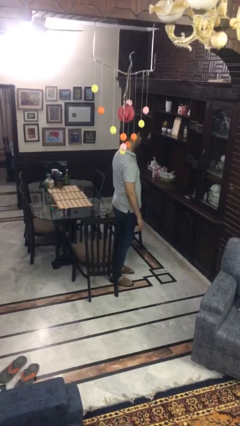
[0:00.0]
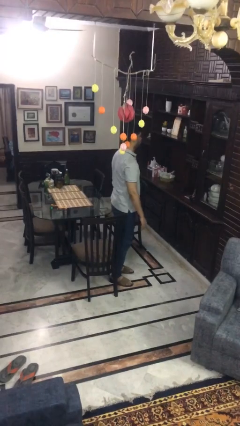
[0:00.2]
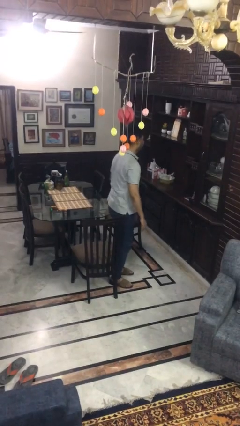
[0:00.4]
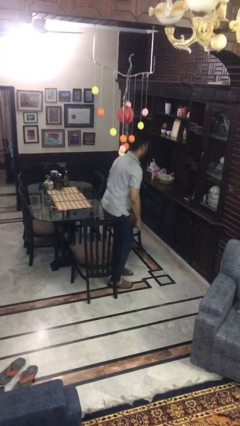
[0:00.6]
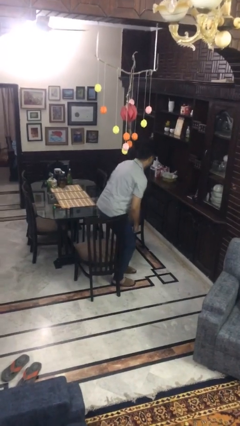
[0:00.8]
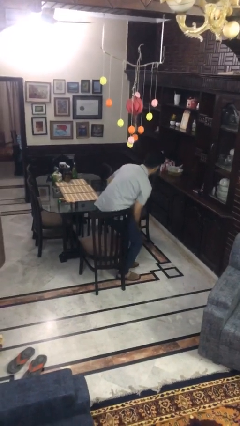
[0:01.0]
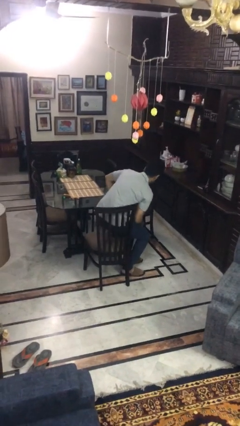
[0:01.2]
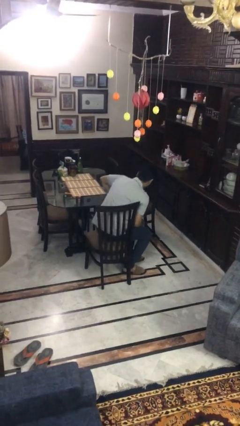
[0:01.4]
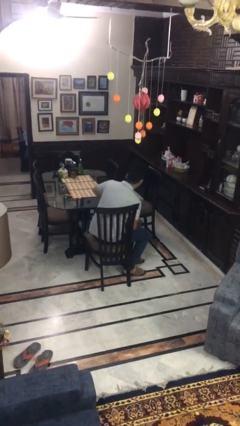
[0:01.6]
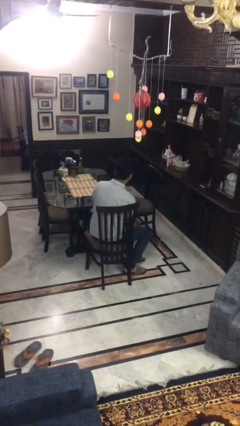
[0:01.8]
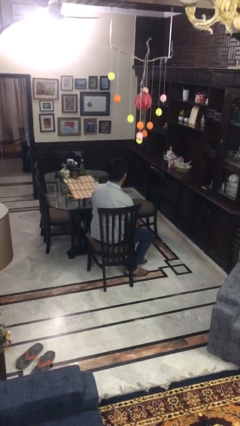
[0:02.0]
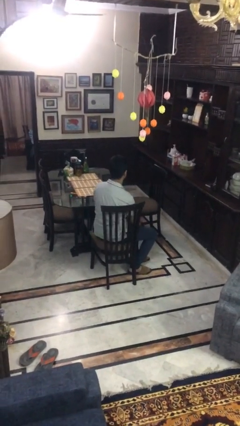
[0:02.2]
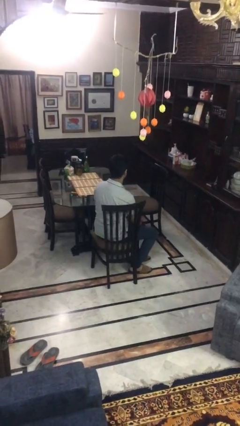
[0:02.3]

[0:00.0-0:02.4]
person sits down

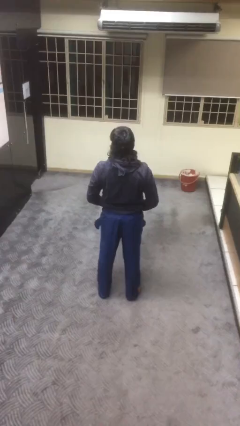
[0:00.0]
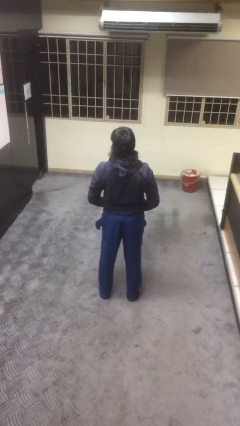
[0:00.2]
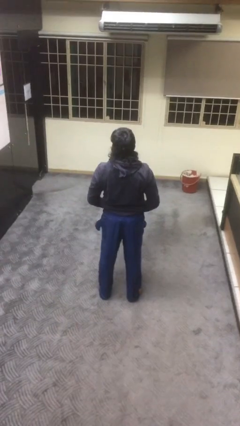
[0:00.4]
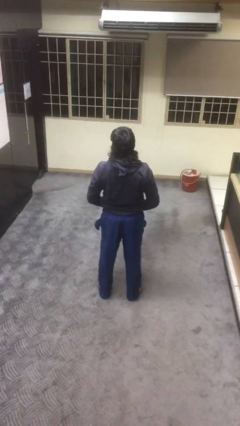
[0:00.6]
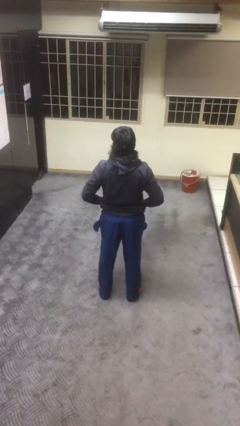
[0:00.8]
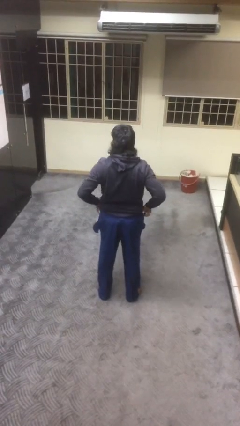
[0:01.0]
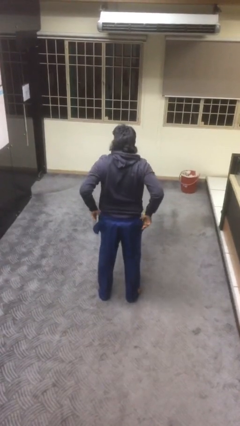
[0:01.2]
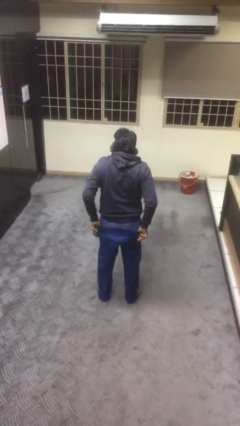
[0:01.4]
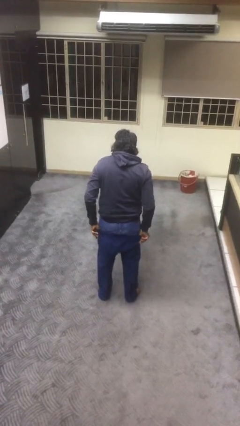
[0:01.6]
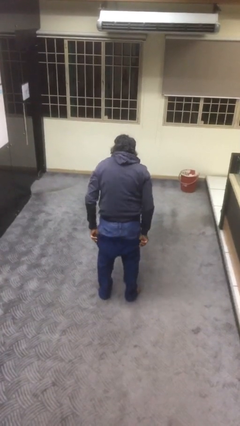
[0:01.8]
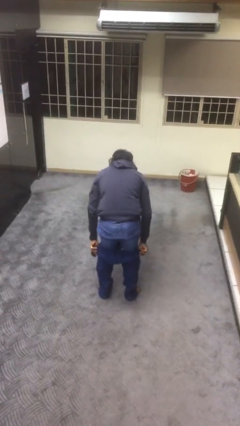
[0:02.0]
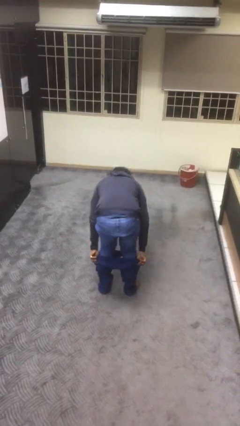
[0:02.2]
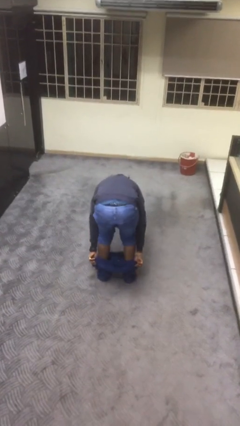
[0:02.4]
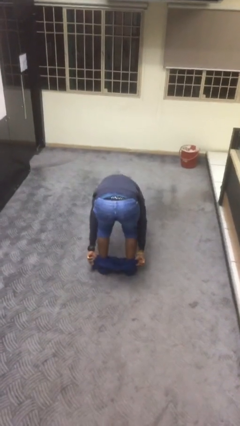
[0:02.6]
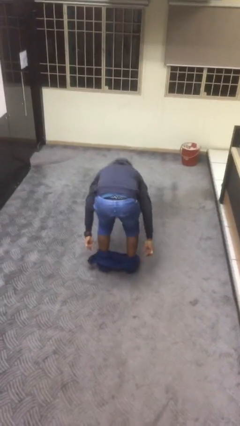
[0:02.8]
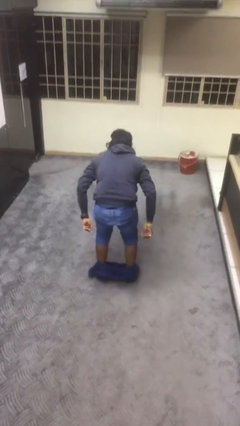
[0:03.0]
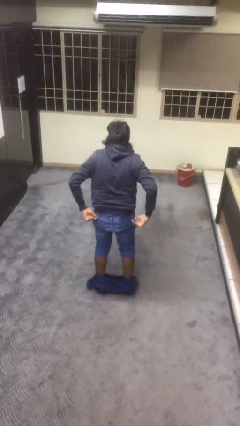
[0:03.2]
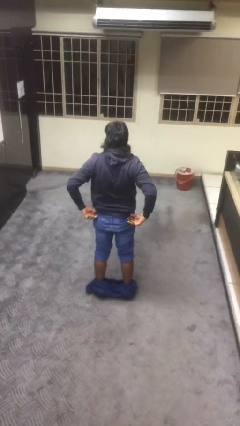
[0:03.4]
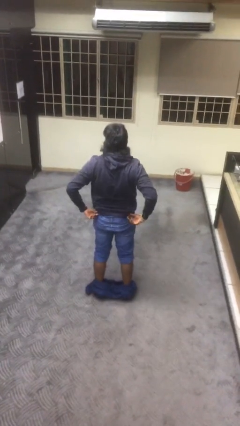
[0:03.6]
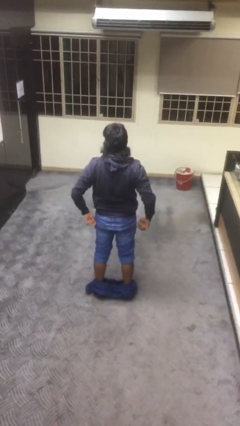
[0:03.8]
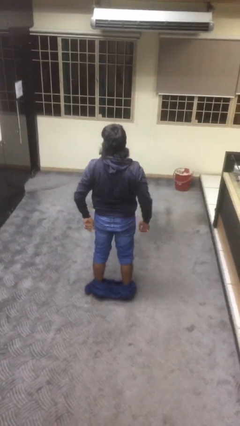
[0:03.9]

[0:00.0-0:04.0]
person takes off pants

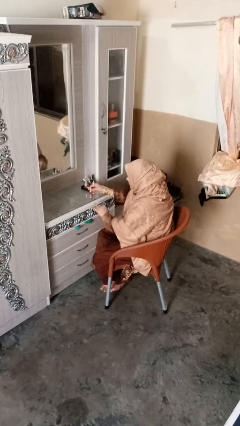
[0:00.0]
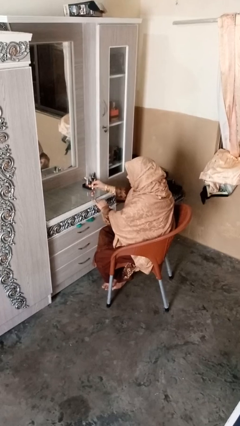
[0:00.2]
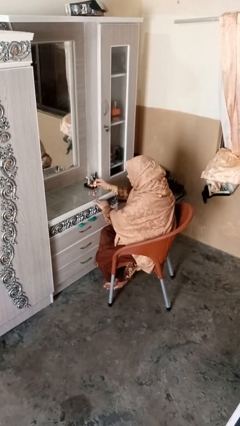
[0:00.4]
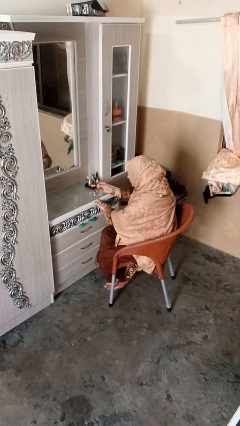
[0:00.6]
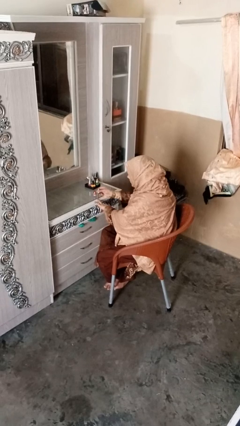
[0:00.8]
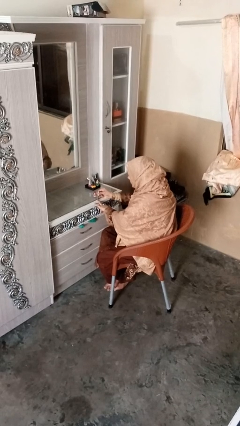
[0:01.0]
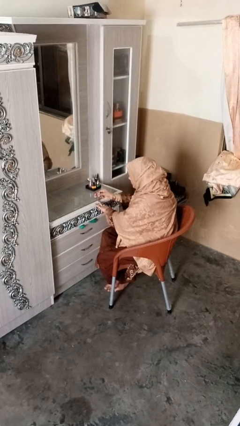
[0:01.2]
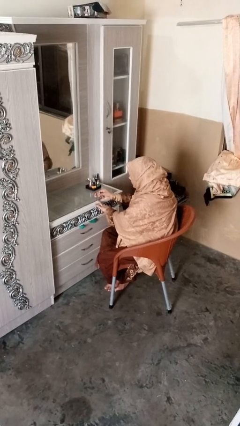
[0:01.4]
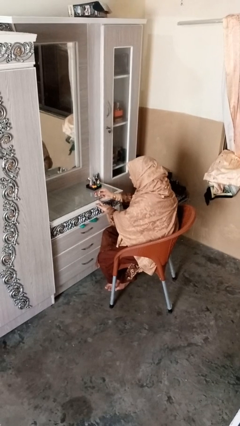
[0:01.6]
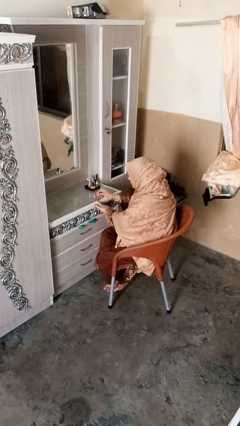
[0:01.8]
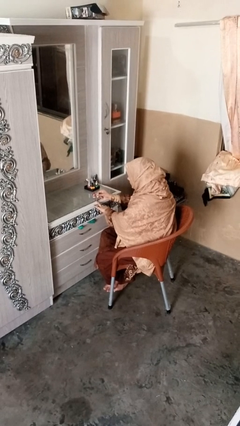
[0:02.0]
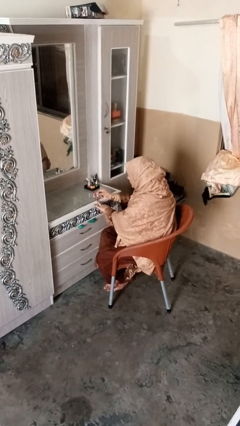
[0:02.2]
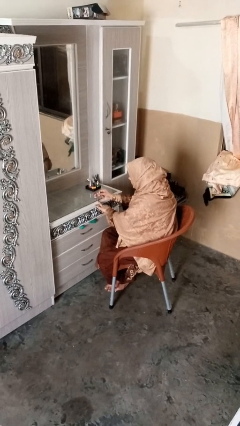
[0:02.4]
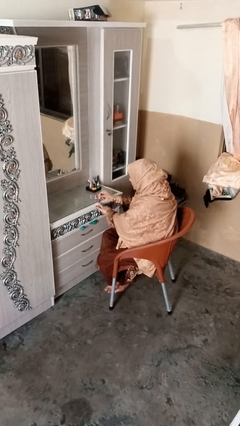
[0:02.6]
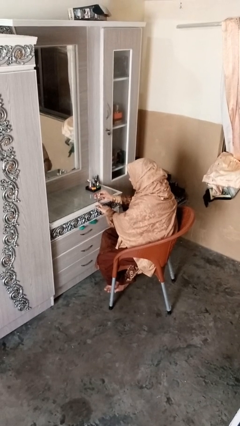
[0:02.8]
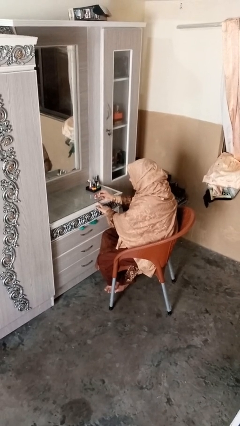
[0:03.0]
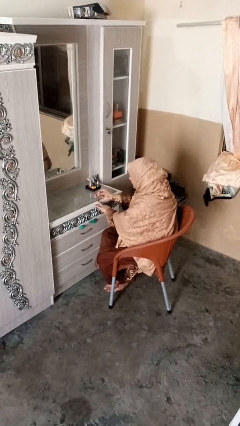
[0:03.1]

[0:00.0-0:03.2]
person paints fingernails

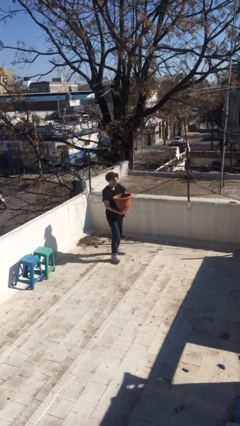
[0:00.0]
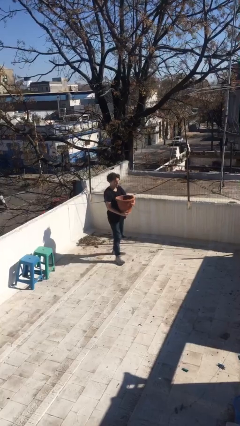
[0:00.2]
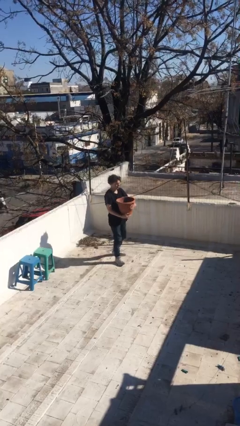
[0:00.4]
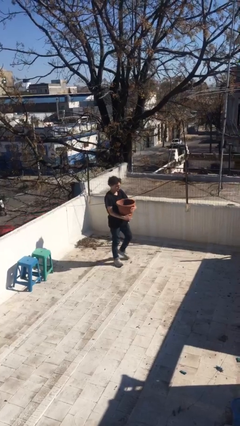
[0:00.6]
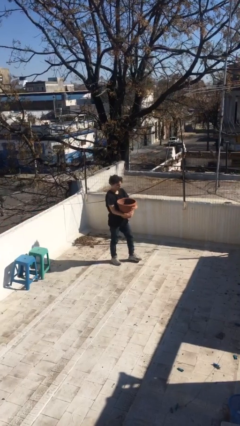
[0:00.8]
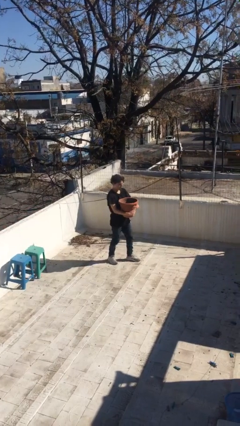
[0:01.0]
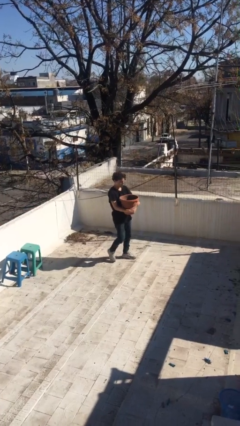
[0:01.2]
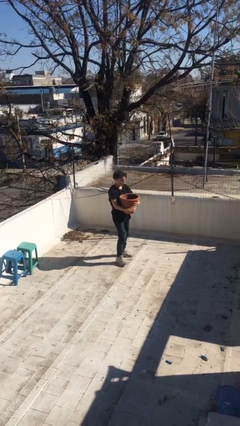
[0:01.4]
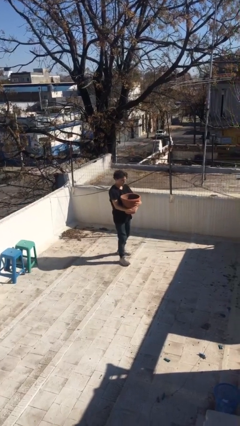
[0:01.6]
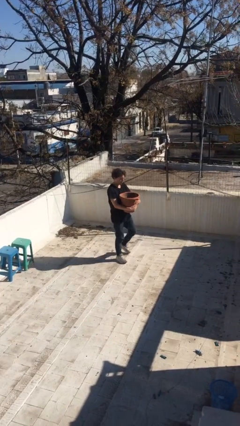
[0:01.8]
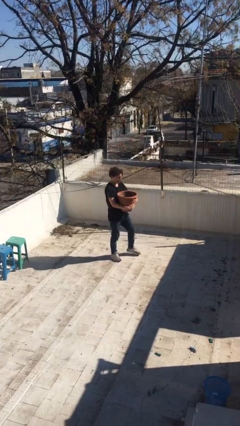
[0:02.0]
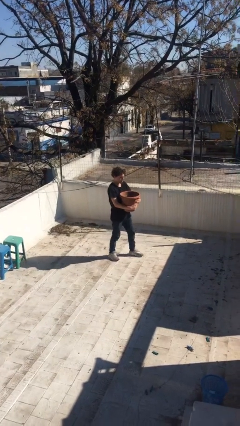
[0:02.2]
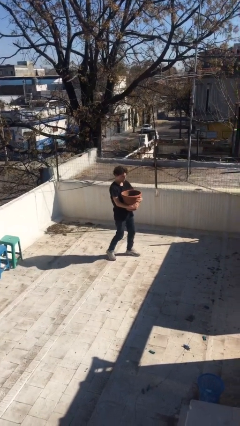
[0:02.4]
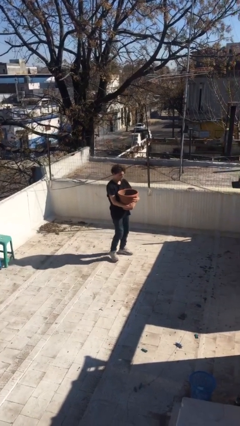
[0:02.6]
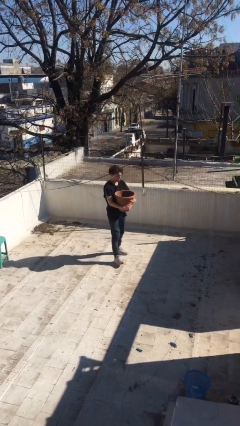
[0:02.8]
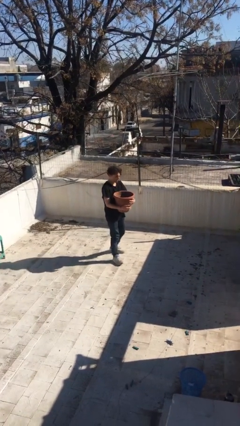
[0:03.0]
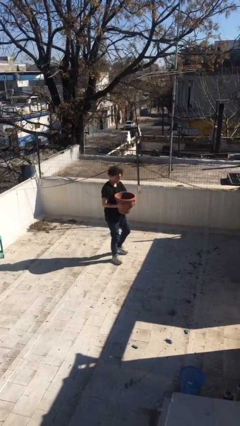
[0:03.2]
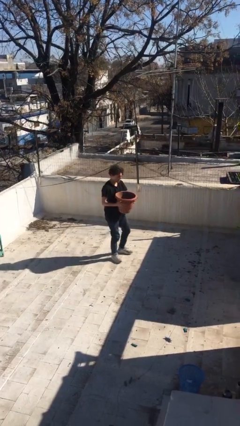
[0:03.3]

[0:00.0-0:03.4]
person carries heavy object

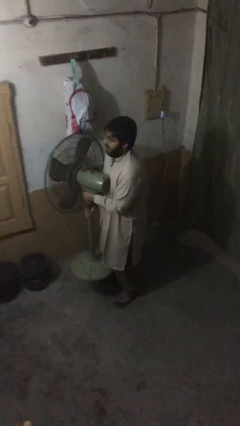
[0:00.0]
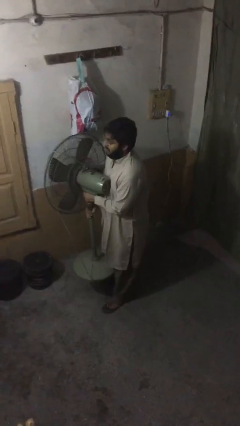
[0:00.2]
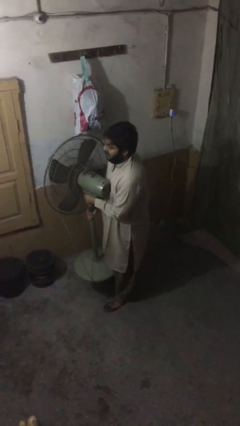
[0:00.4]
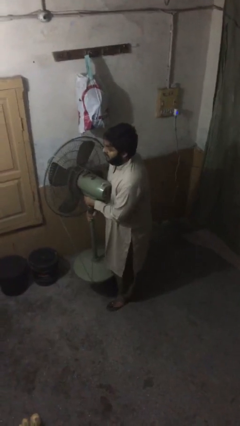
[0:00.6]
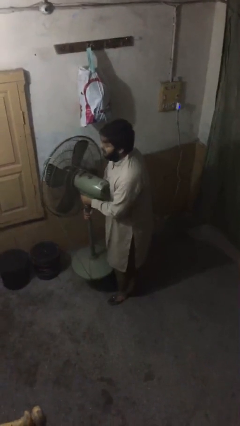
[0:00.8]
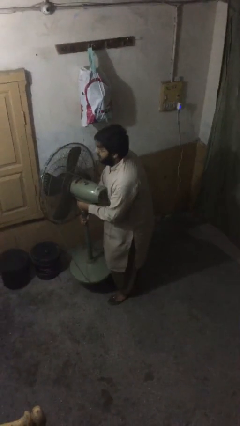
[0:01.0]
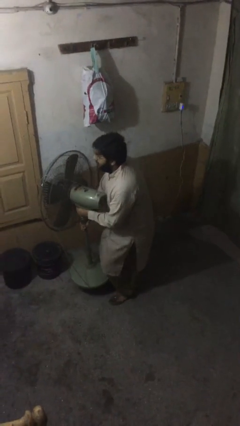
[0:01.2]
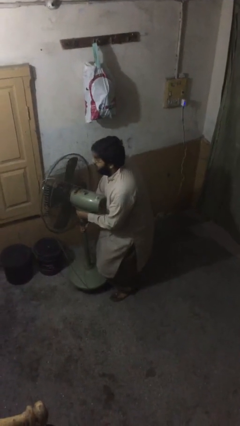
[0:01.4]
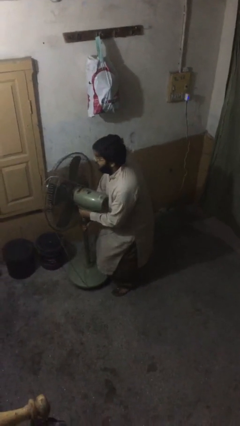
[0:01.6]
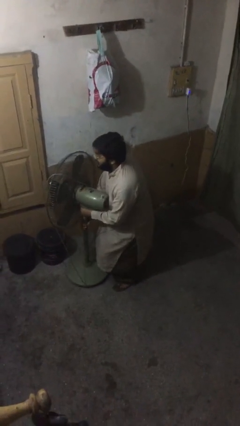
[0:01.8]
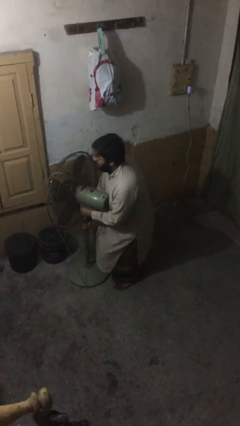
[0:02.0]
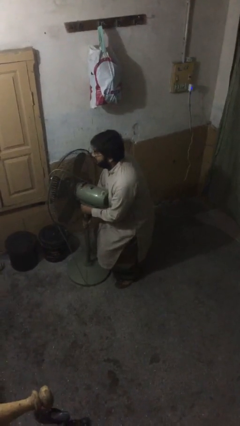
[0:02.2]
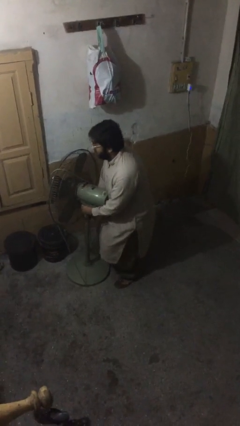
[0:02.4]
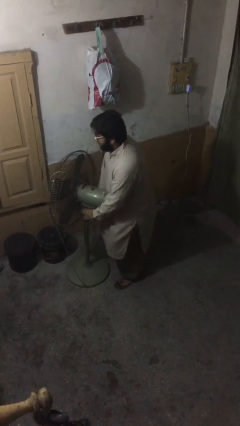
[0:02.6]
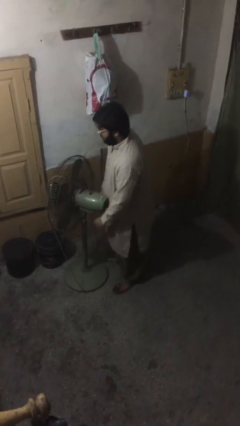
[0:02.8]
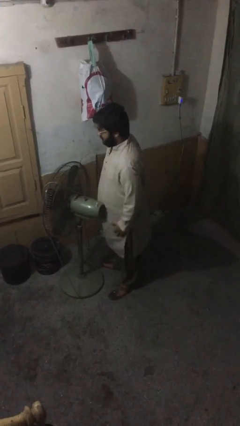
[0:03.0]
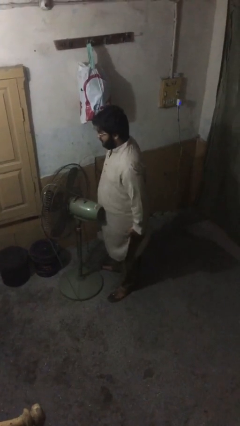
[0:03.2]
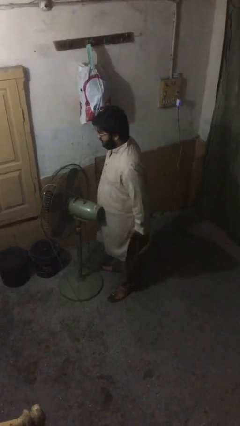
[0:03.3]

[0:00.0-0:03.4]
person puts down object on floor

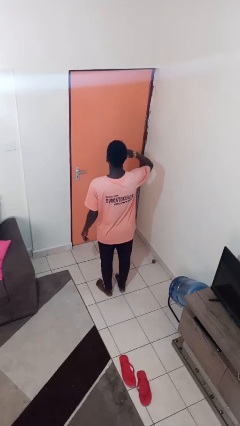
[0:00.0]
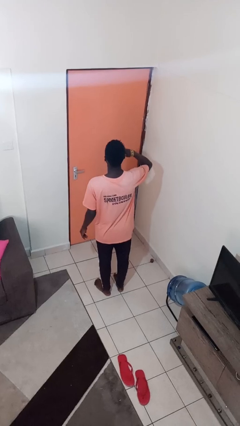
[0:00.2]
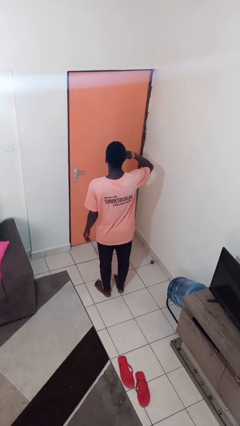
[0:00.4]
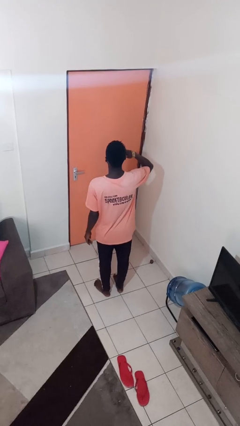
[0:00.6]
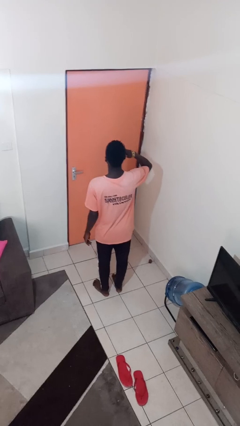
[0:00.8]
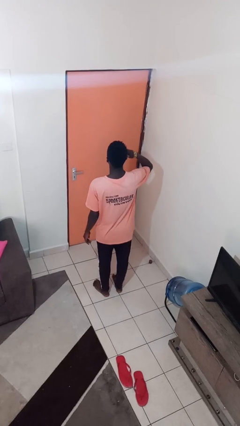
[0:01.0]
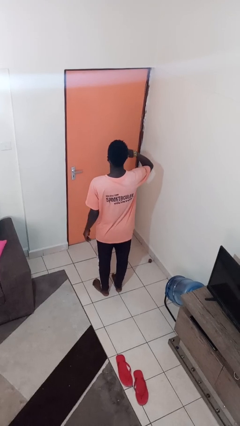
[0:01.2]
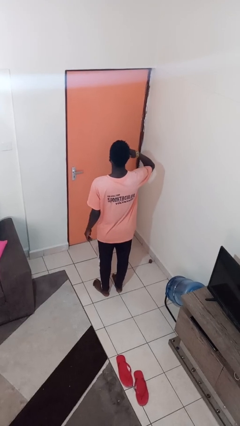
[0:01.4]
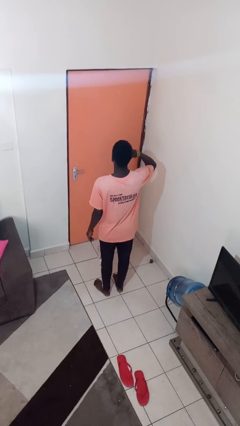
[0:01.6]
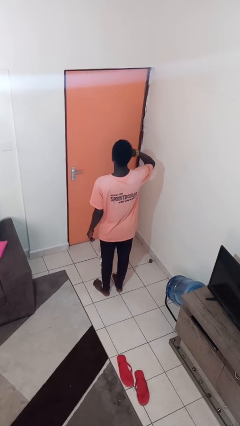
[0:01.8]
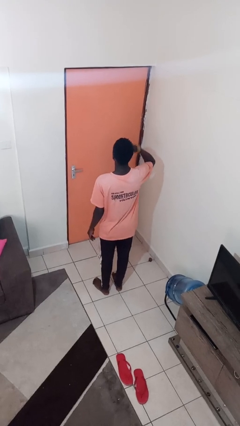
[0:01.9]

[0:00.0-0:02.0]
person gestures call me
